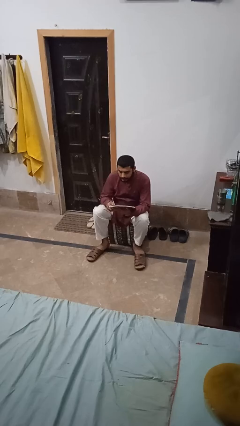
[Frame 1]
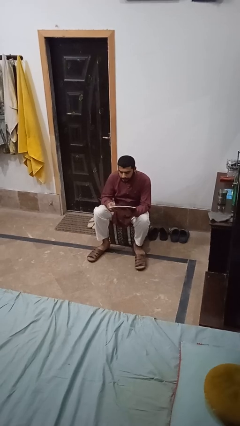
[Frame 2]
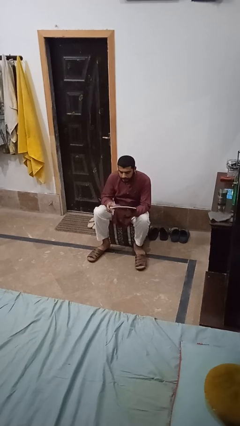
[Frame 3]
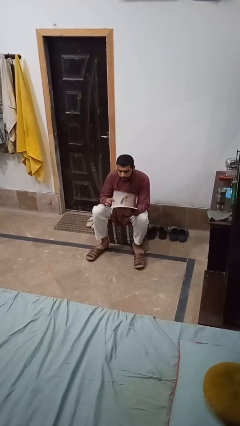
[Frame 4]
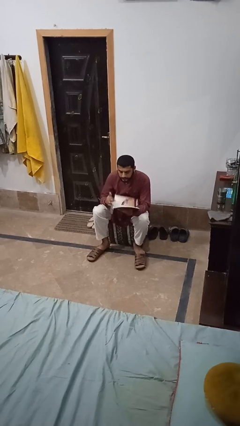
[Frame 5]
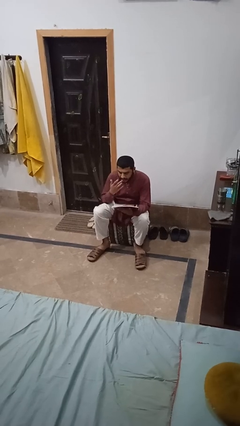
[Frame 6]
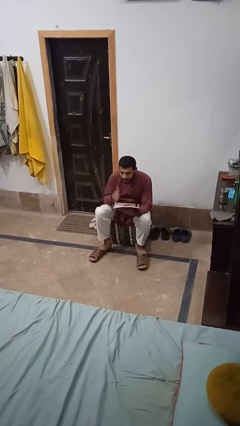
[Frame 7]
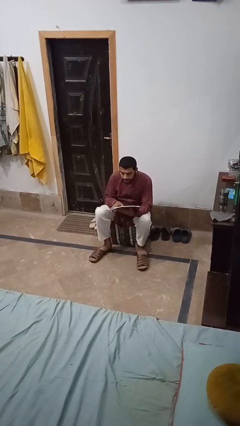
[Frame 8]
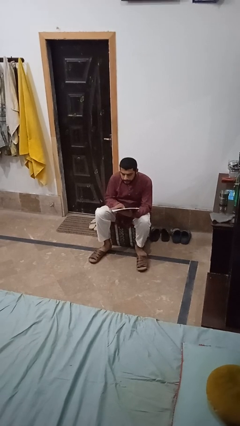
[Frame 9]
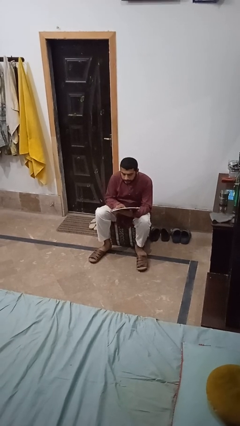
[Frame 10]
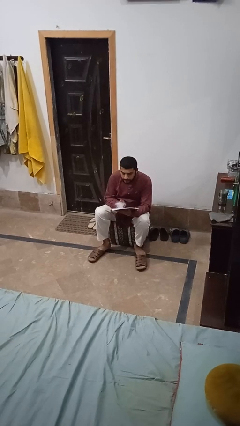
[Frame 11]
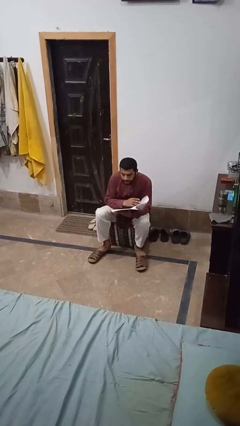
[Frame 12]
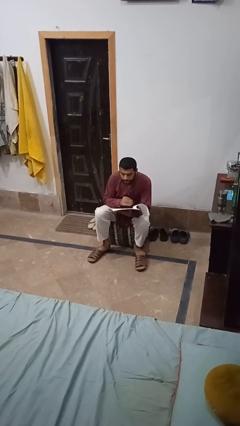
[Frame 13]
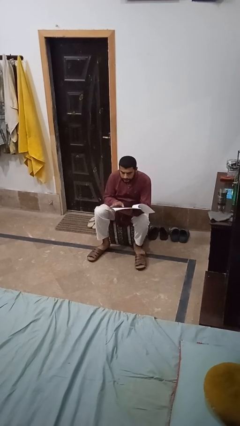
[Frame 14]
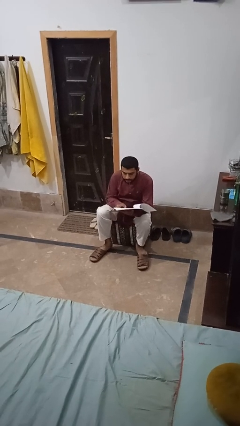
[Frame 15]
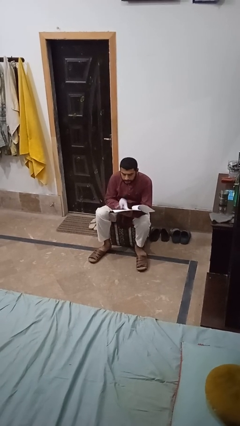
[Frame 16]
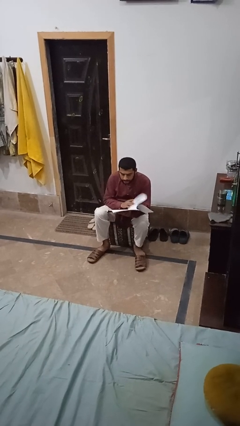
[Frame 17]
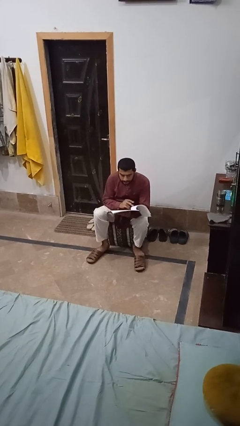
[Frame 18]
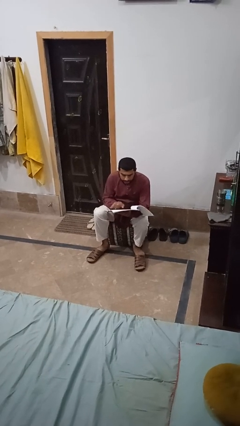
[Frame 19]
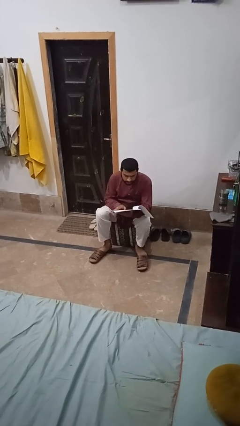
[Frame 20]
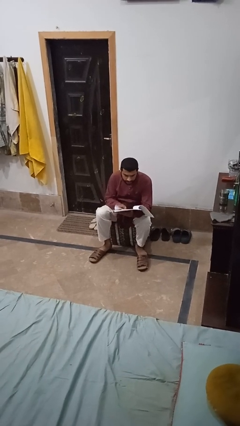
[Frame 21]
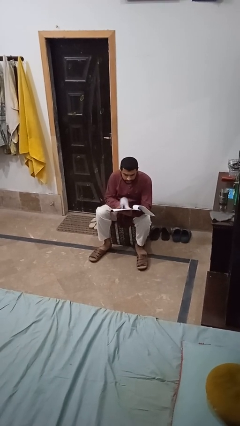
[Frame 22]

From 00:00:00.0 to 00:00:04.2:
person sits crisscross

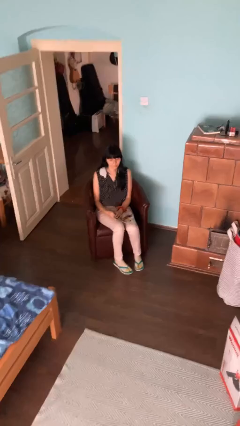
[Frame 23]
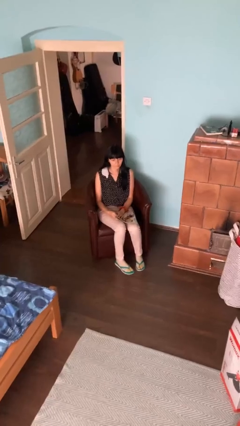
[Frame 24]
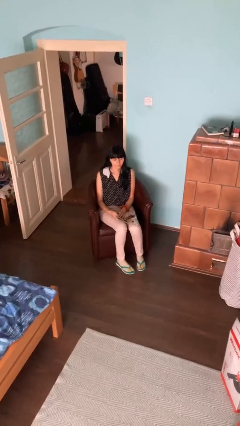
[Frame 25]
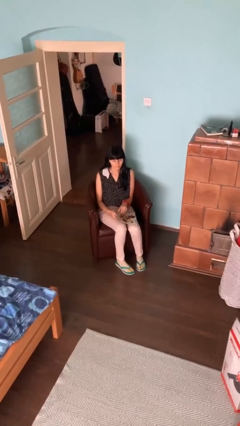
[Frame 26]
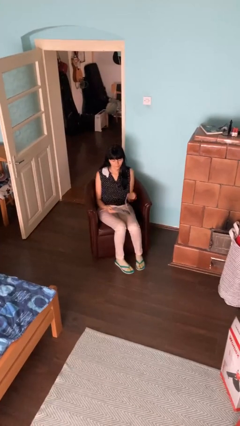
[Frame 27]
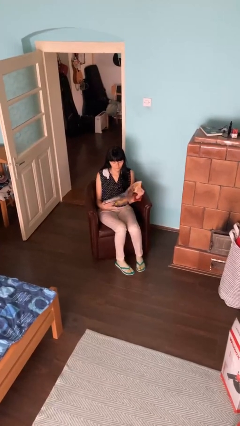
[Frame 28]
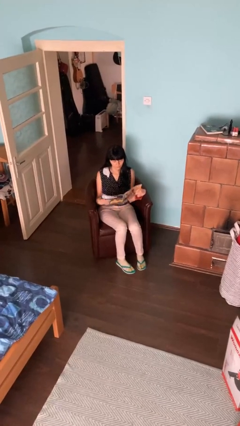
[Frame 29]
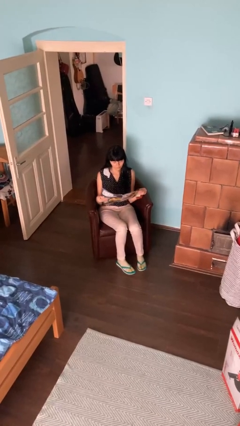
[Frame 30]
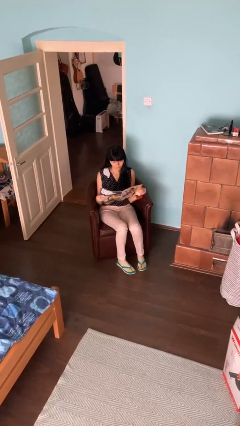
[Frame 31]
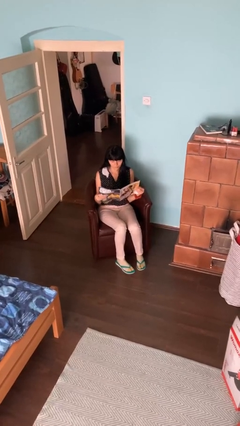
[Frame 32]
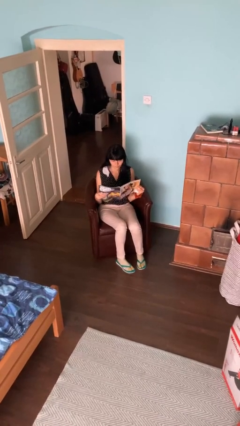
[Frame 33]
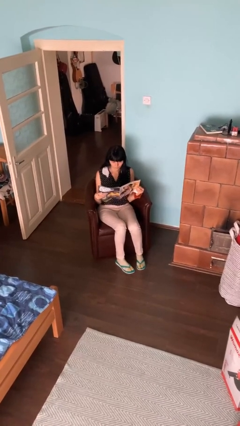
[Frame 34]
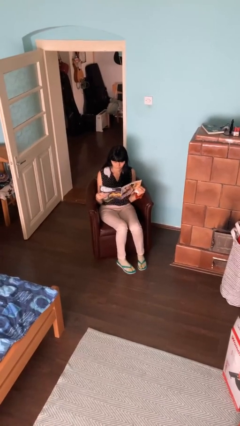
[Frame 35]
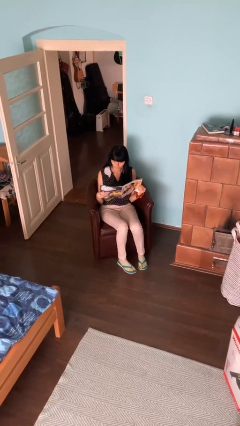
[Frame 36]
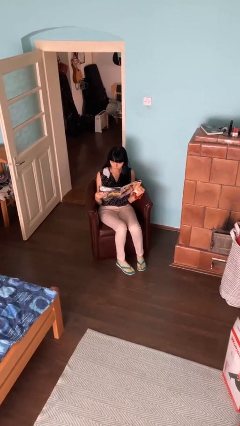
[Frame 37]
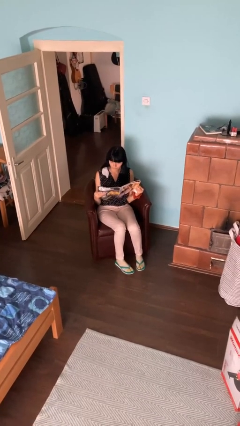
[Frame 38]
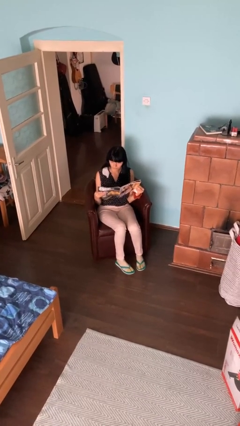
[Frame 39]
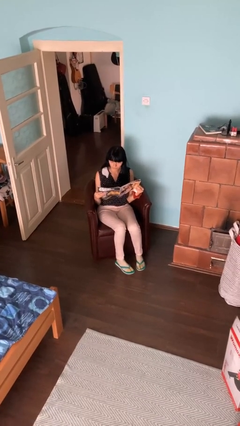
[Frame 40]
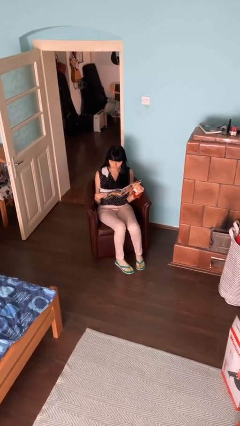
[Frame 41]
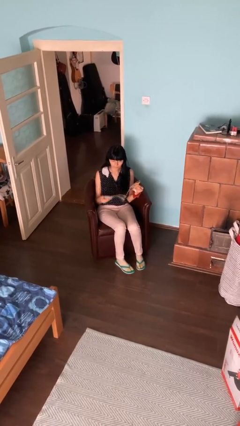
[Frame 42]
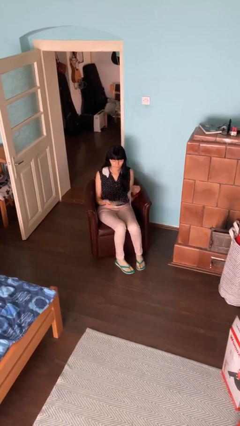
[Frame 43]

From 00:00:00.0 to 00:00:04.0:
person reads magazine

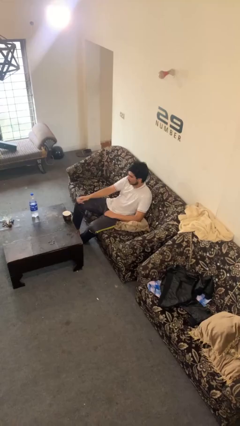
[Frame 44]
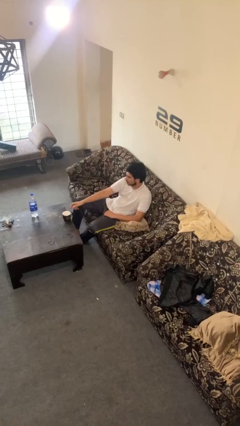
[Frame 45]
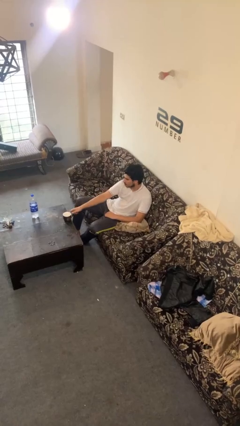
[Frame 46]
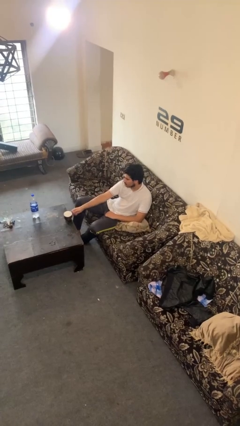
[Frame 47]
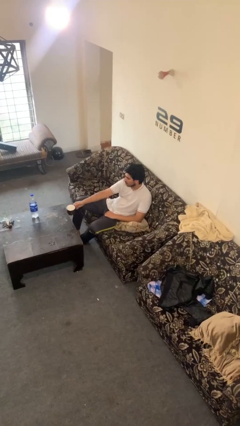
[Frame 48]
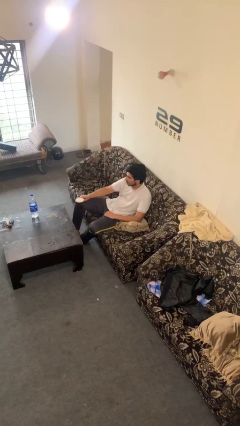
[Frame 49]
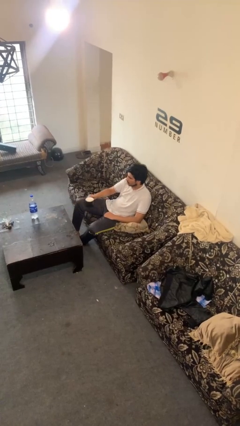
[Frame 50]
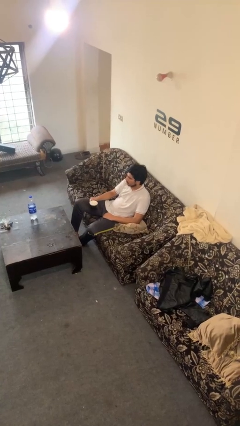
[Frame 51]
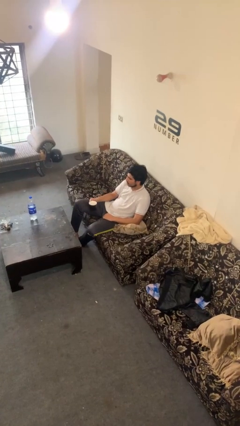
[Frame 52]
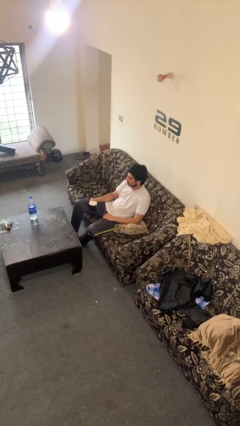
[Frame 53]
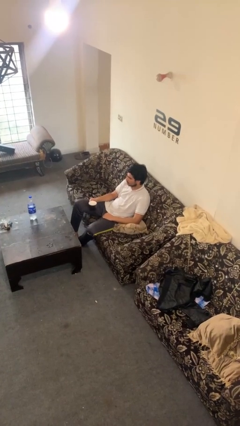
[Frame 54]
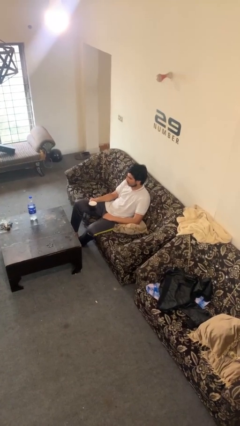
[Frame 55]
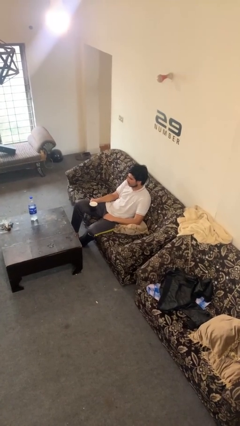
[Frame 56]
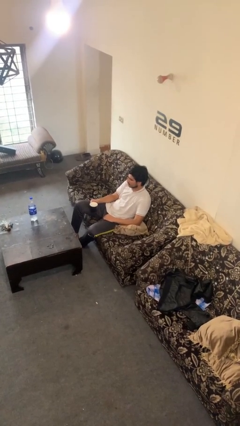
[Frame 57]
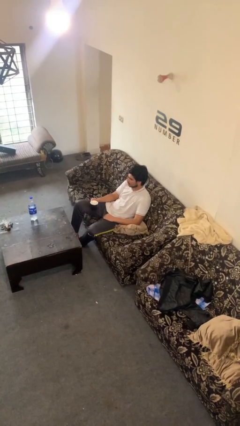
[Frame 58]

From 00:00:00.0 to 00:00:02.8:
person picks up object from table

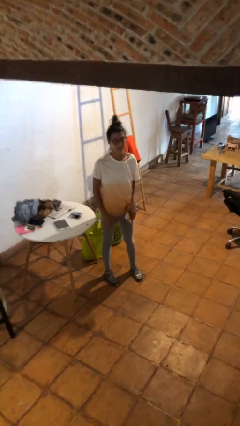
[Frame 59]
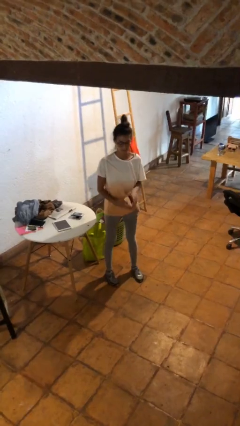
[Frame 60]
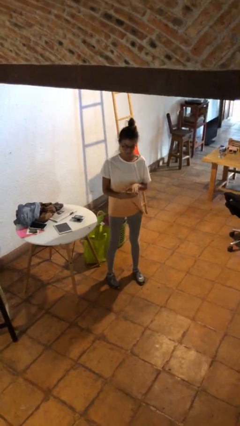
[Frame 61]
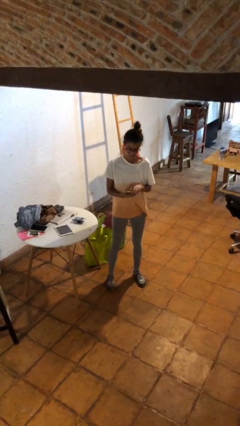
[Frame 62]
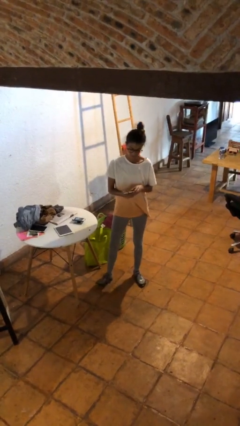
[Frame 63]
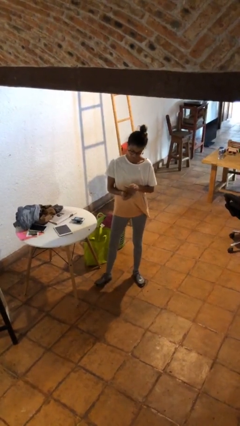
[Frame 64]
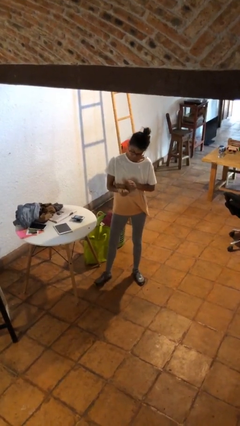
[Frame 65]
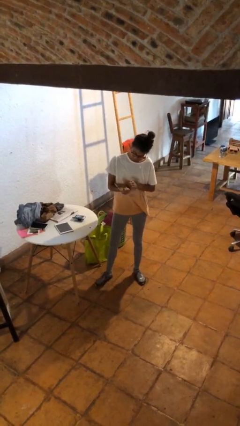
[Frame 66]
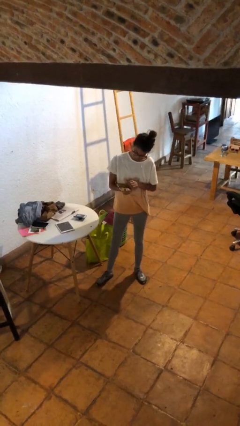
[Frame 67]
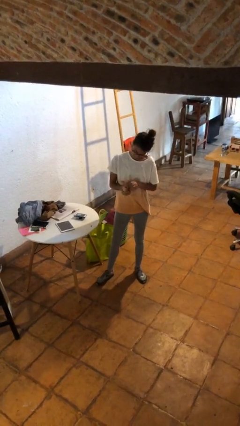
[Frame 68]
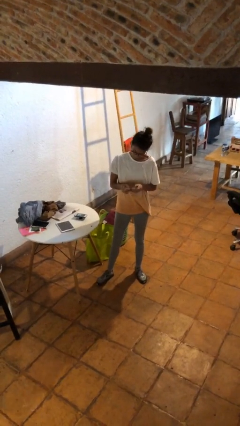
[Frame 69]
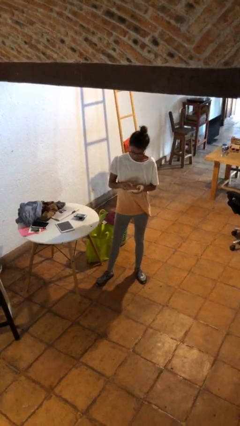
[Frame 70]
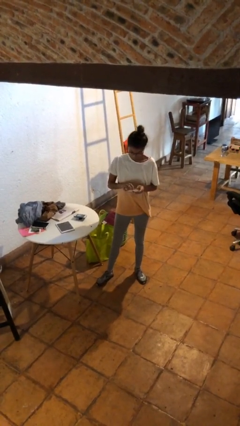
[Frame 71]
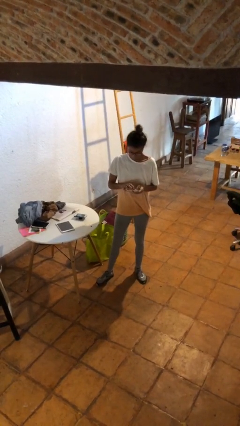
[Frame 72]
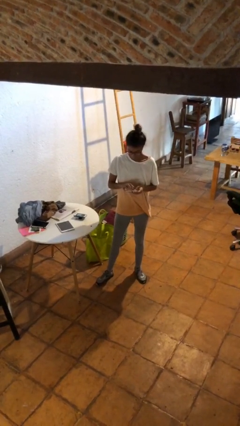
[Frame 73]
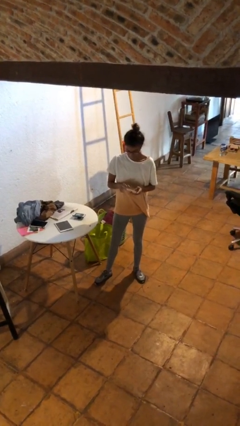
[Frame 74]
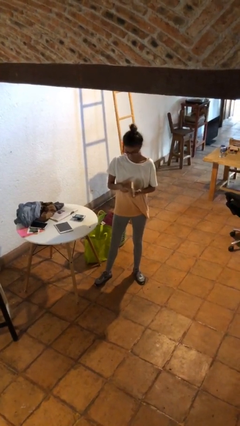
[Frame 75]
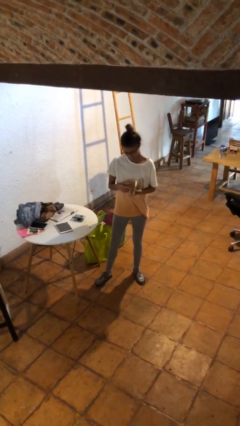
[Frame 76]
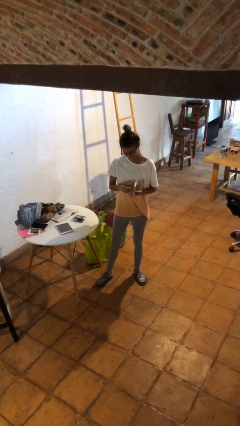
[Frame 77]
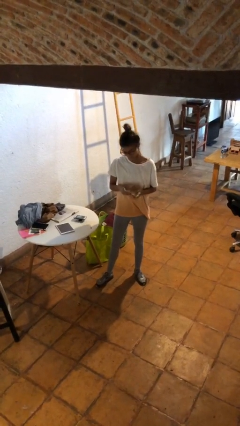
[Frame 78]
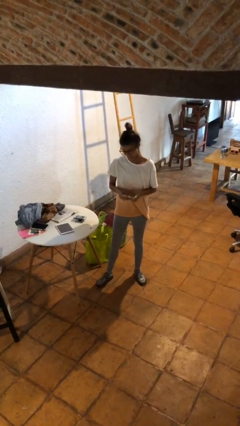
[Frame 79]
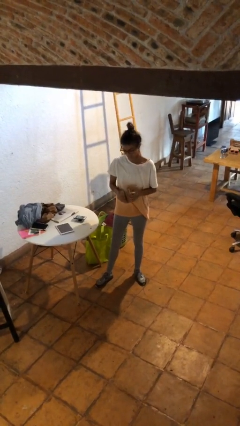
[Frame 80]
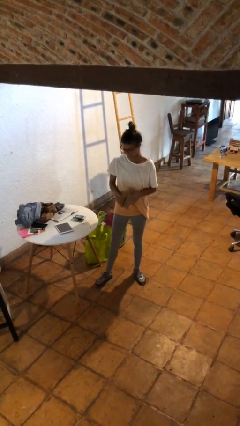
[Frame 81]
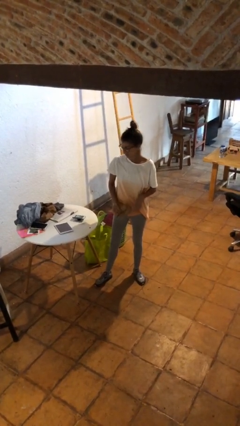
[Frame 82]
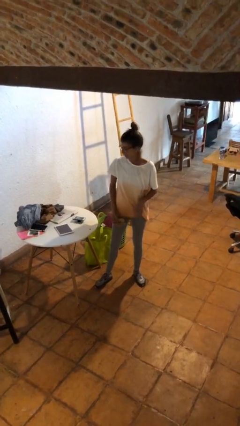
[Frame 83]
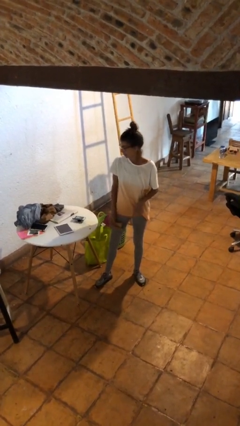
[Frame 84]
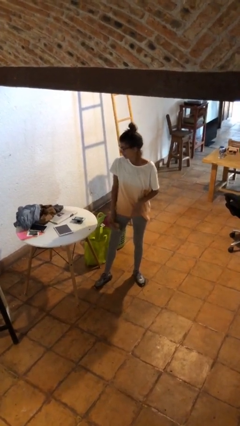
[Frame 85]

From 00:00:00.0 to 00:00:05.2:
person taps object with finger

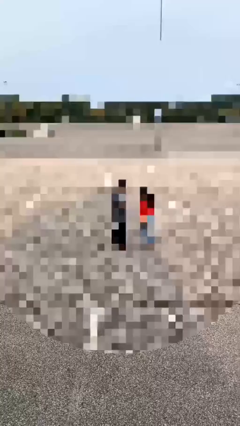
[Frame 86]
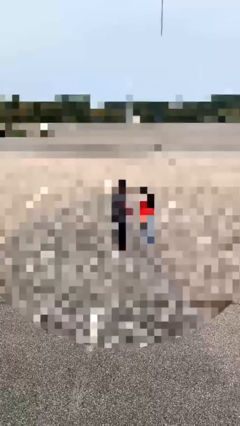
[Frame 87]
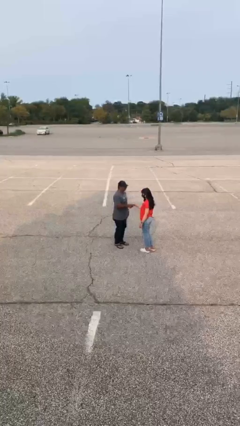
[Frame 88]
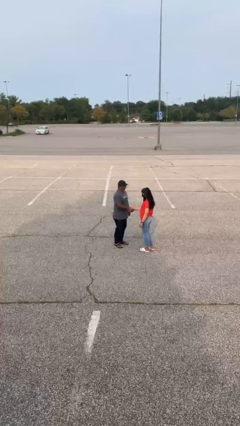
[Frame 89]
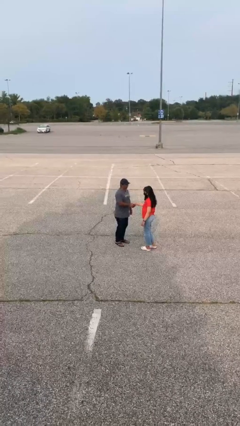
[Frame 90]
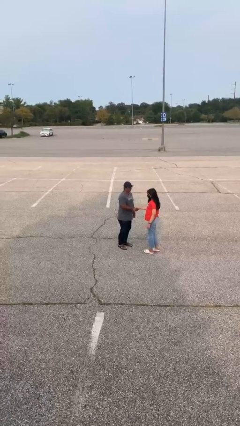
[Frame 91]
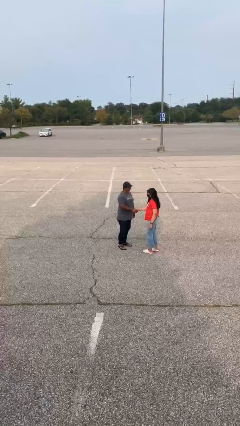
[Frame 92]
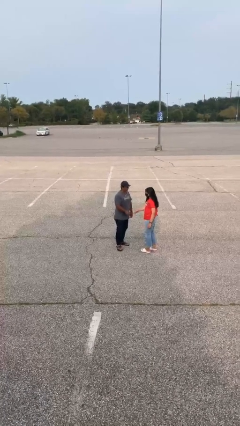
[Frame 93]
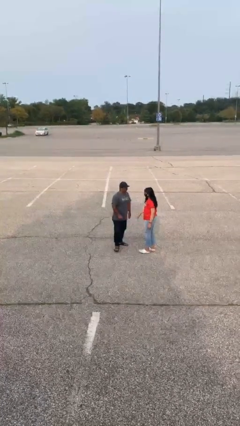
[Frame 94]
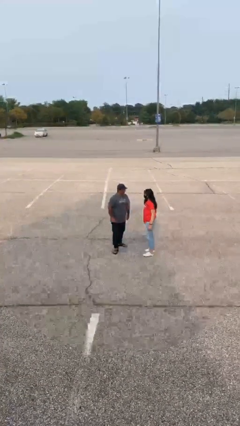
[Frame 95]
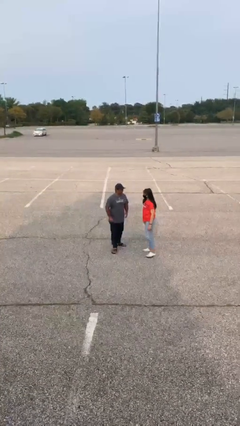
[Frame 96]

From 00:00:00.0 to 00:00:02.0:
person shakes hand
